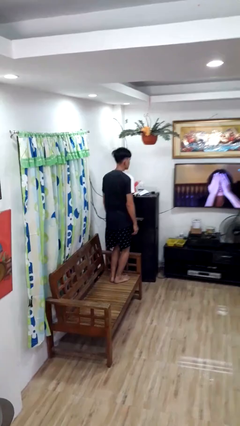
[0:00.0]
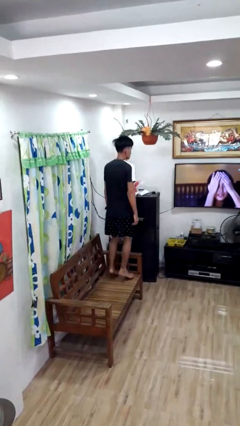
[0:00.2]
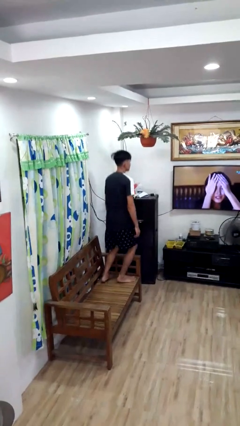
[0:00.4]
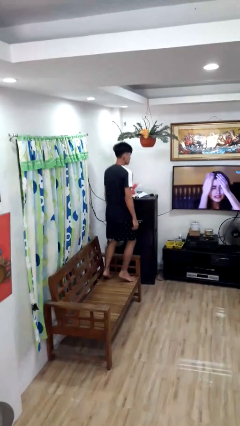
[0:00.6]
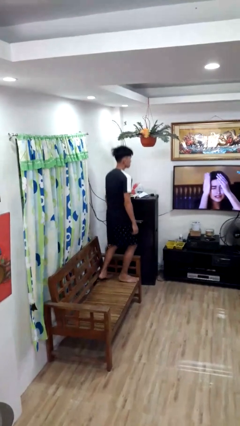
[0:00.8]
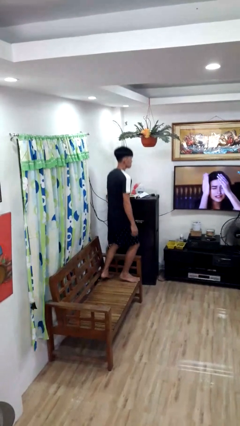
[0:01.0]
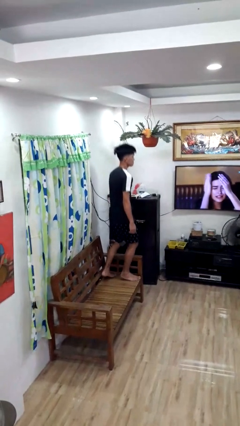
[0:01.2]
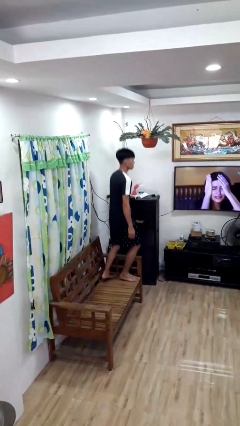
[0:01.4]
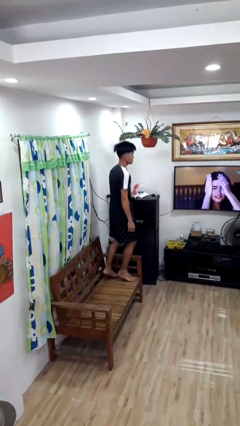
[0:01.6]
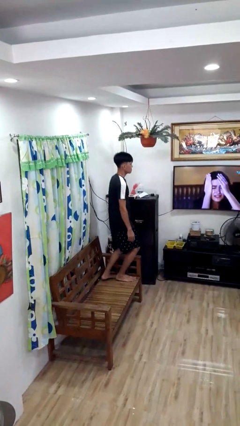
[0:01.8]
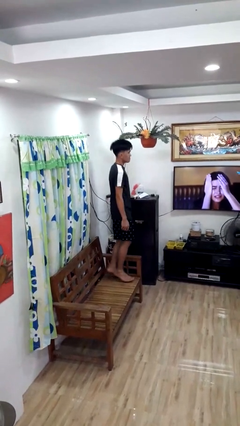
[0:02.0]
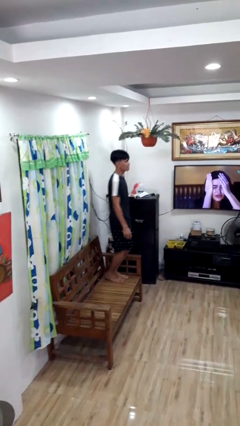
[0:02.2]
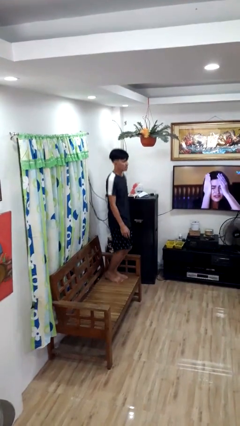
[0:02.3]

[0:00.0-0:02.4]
person jumps on couch

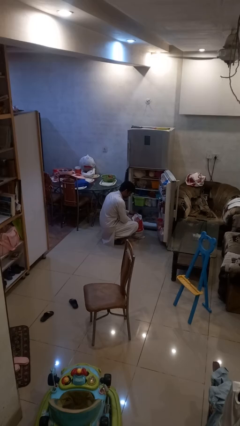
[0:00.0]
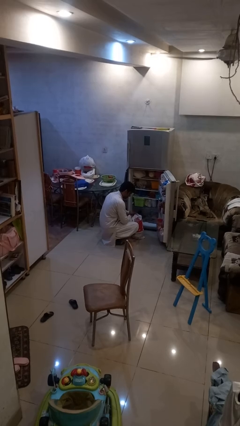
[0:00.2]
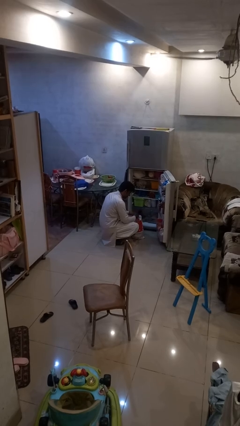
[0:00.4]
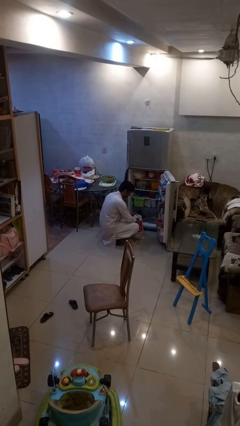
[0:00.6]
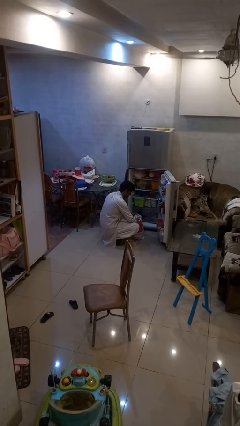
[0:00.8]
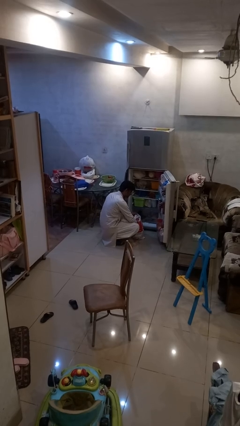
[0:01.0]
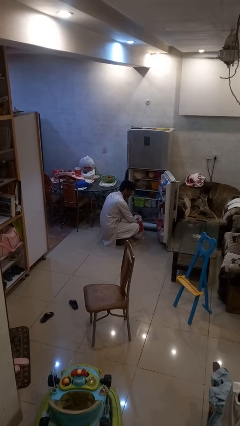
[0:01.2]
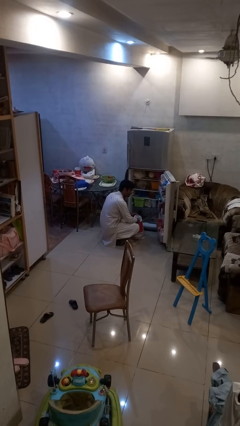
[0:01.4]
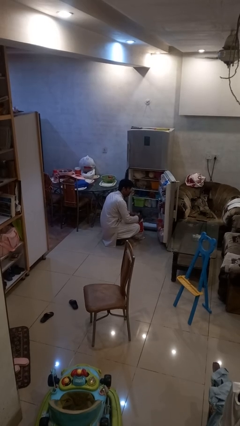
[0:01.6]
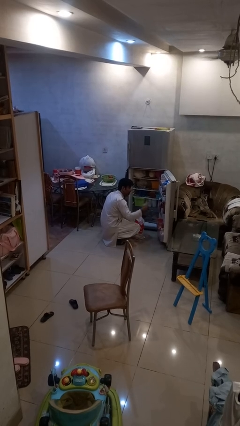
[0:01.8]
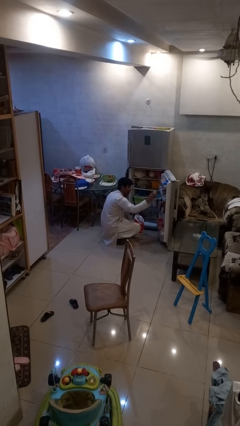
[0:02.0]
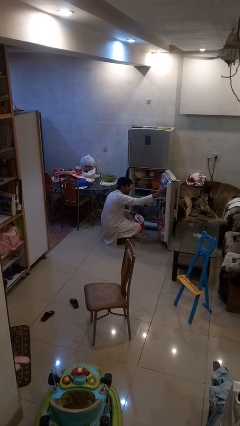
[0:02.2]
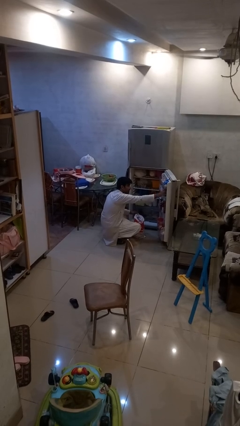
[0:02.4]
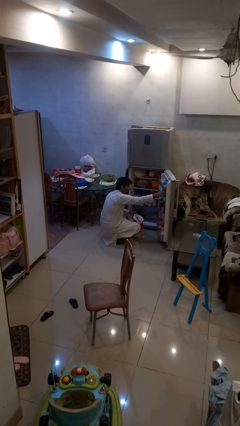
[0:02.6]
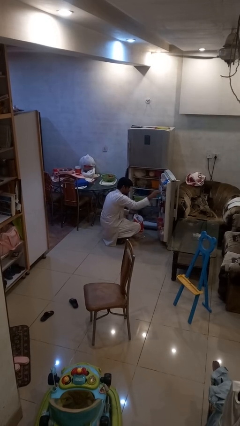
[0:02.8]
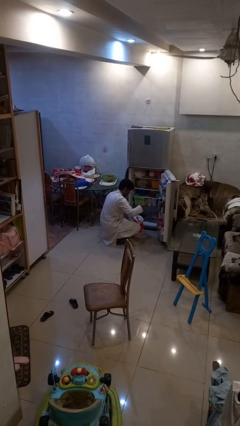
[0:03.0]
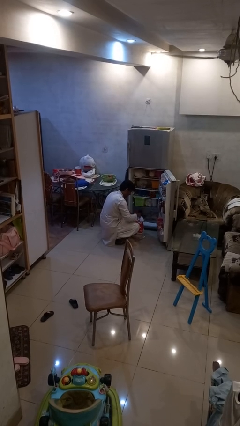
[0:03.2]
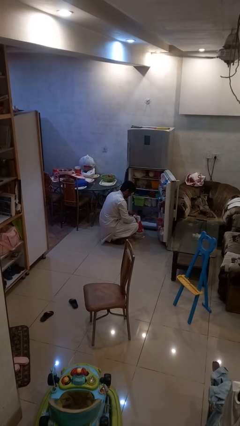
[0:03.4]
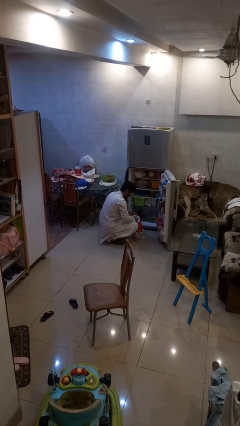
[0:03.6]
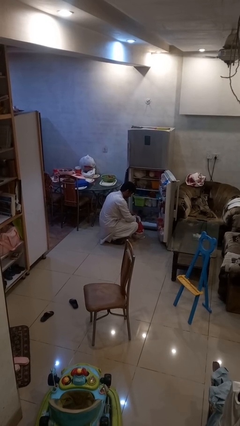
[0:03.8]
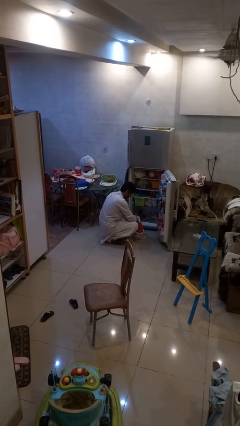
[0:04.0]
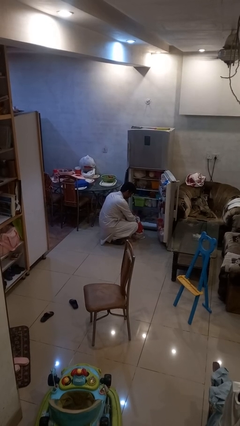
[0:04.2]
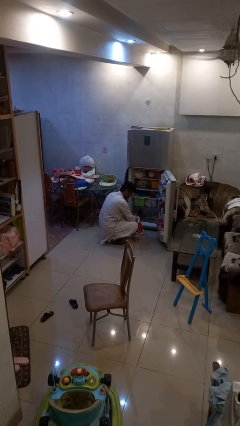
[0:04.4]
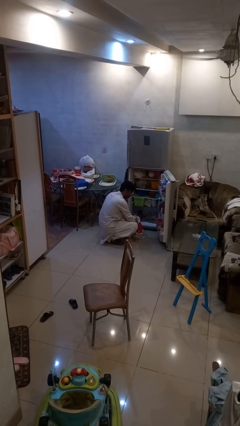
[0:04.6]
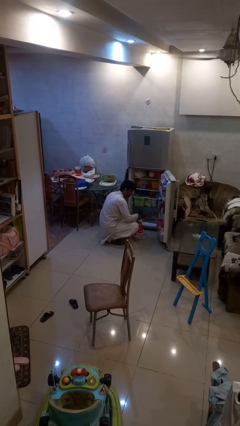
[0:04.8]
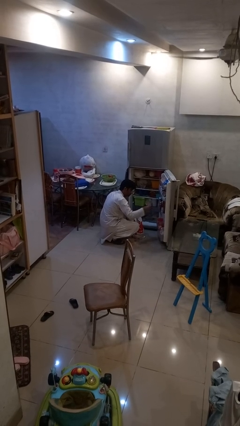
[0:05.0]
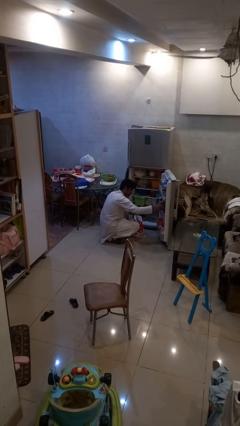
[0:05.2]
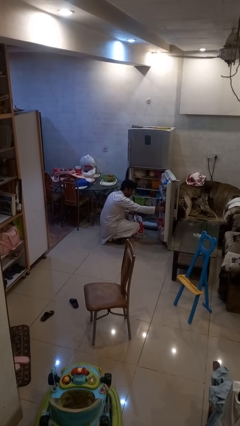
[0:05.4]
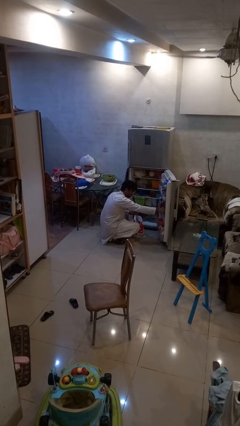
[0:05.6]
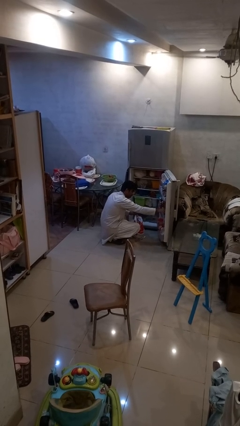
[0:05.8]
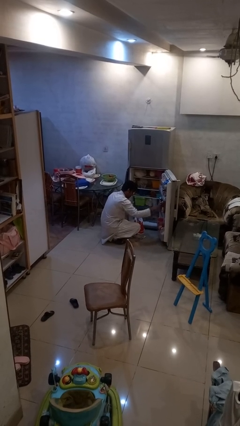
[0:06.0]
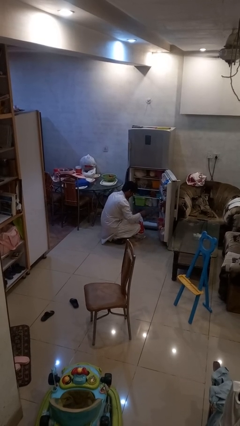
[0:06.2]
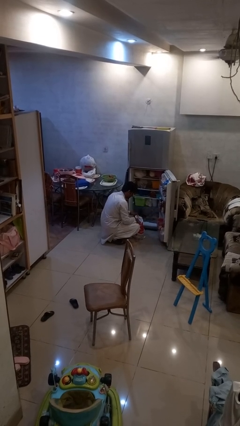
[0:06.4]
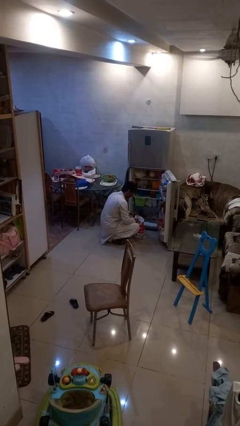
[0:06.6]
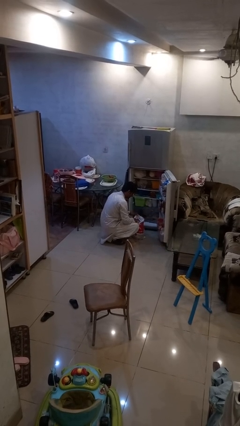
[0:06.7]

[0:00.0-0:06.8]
person loads groceries into refrigerator

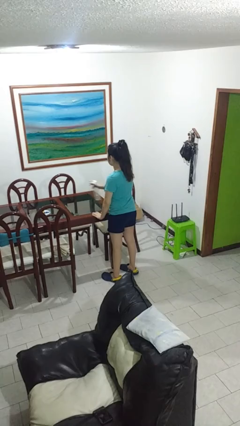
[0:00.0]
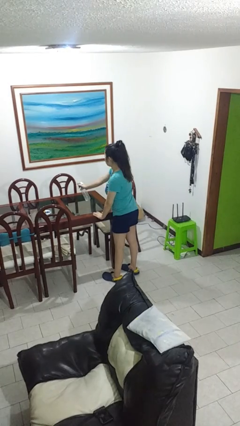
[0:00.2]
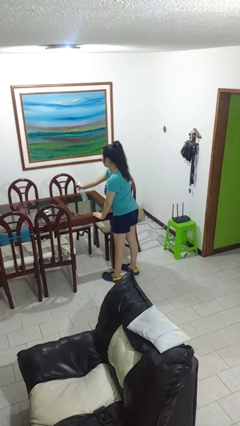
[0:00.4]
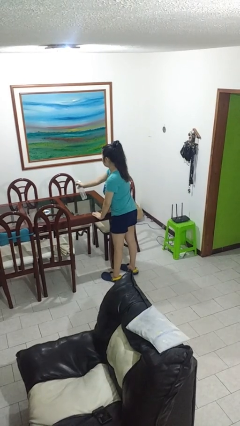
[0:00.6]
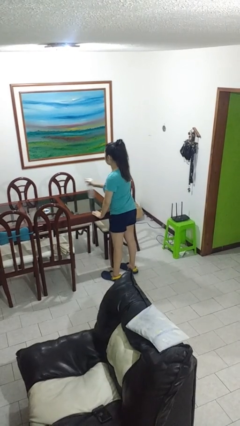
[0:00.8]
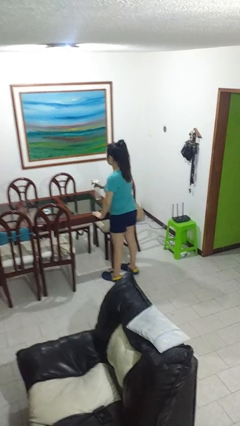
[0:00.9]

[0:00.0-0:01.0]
person sprays from bottle

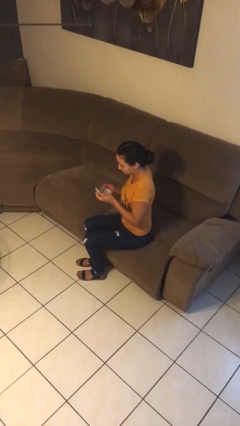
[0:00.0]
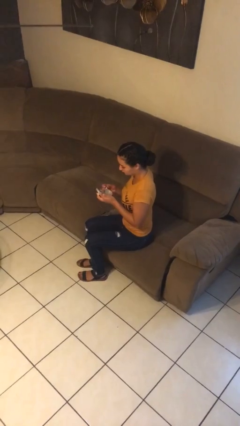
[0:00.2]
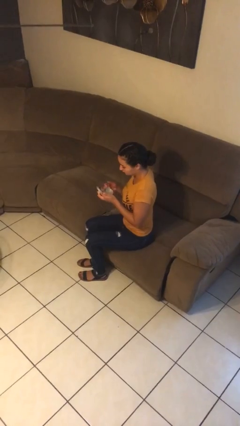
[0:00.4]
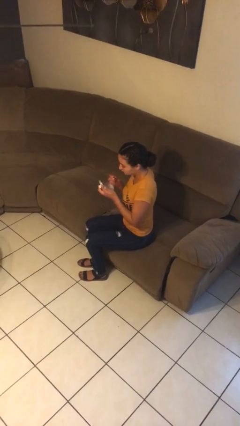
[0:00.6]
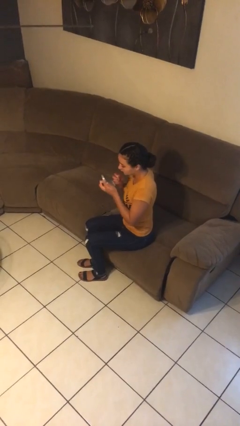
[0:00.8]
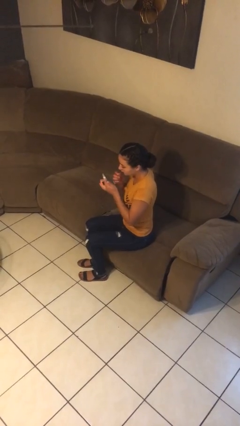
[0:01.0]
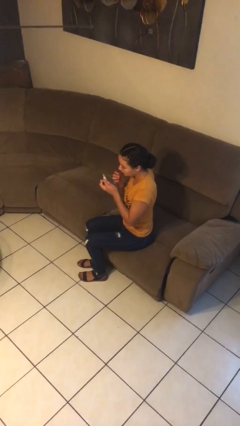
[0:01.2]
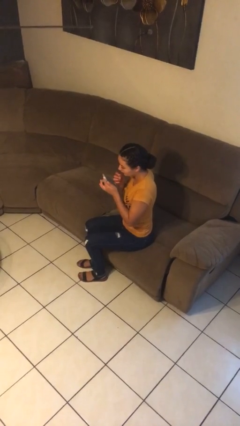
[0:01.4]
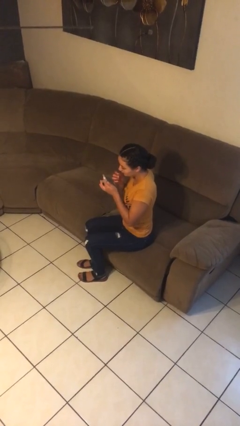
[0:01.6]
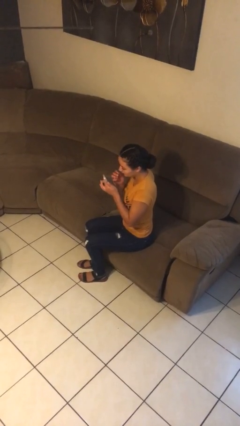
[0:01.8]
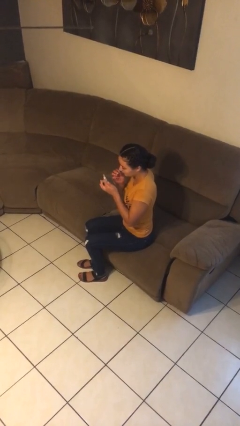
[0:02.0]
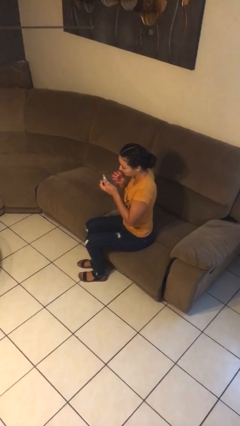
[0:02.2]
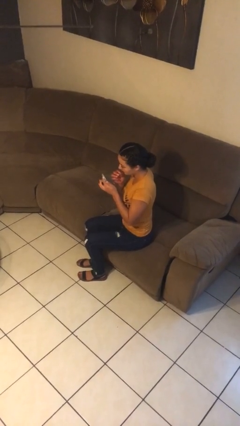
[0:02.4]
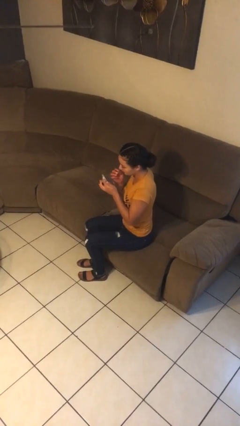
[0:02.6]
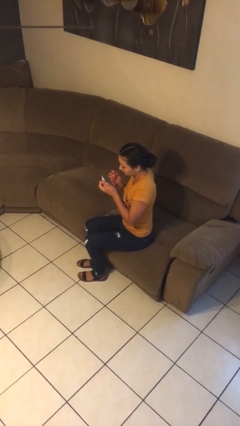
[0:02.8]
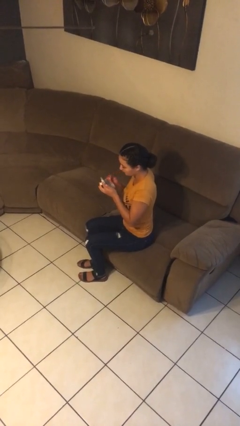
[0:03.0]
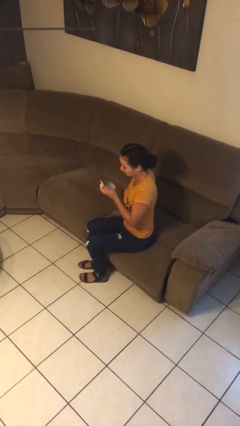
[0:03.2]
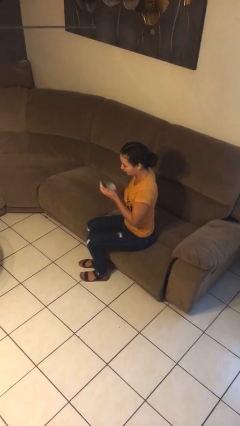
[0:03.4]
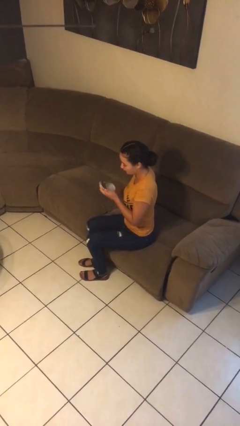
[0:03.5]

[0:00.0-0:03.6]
person applies lip makeup

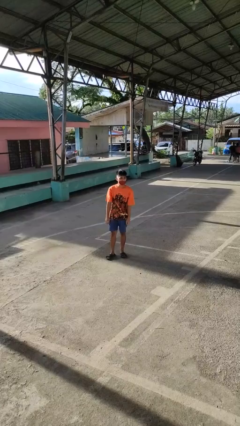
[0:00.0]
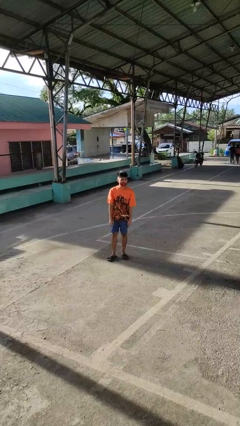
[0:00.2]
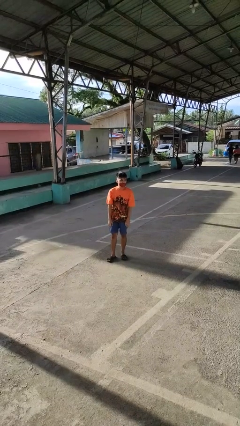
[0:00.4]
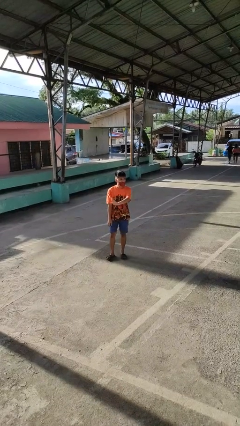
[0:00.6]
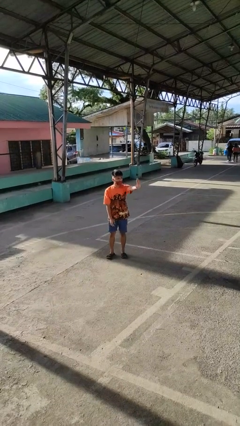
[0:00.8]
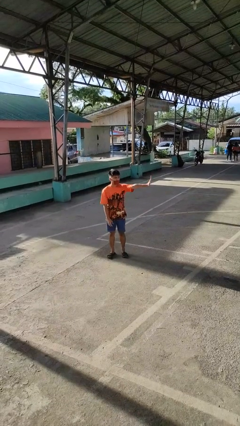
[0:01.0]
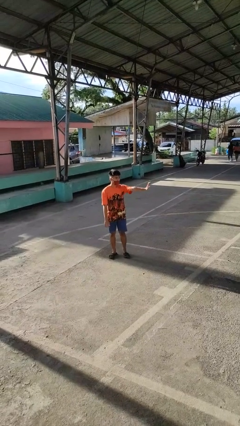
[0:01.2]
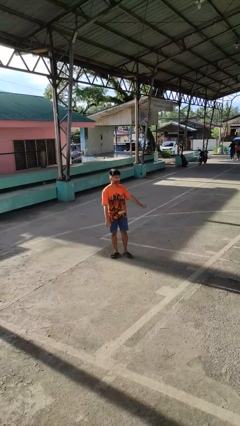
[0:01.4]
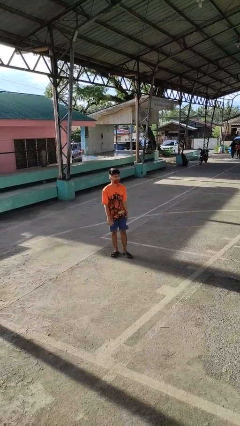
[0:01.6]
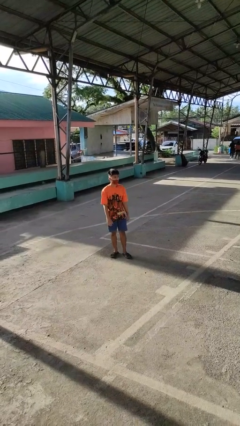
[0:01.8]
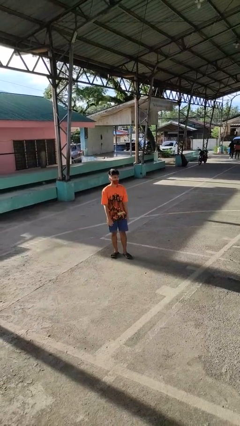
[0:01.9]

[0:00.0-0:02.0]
person gestures swipe left

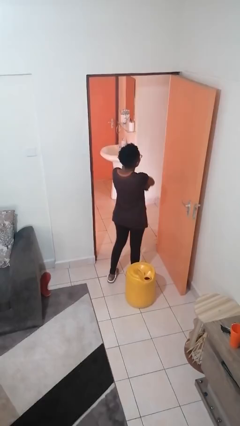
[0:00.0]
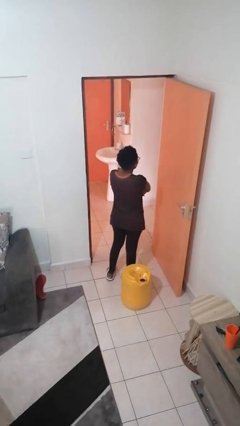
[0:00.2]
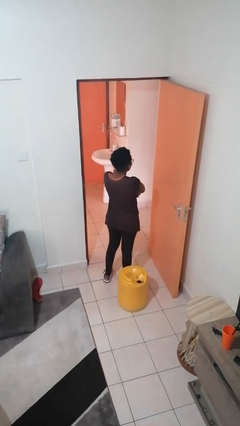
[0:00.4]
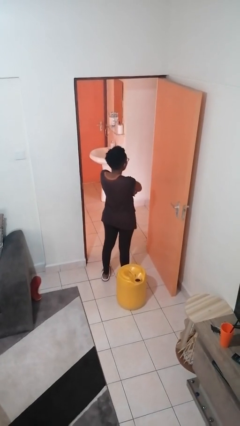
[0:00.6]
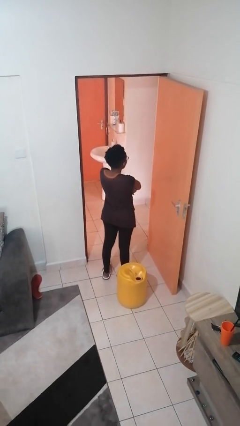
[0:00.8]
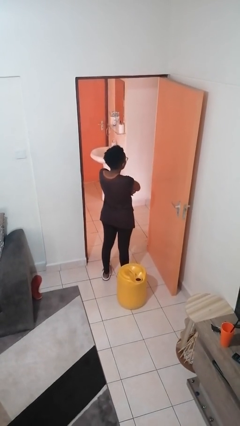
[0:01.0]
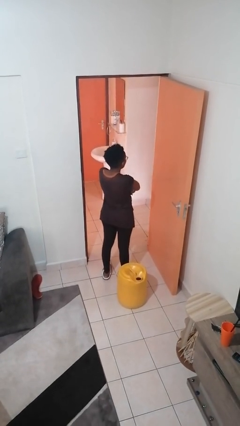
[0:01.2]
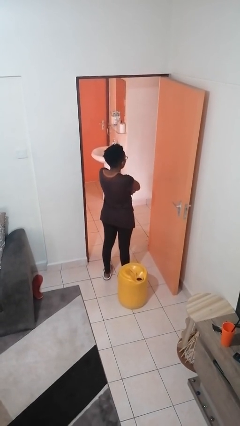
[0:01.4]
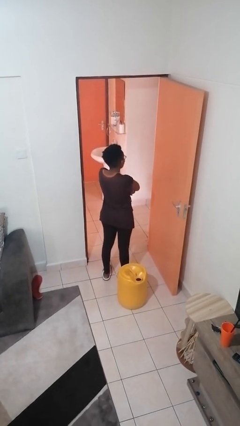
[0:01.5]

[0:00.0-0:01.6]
person crosses arms
